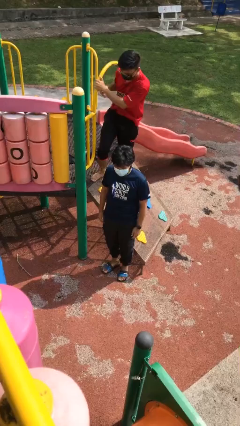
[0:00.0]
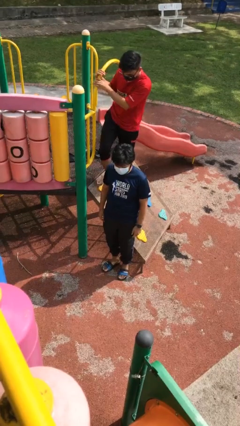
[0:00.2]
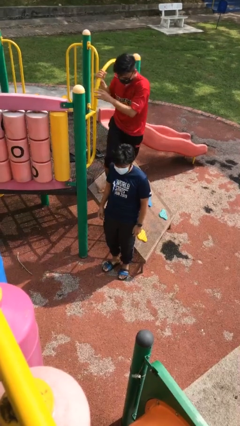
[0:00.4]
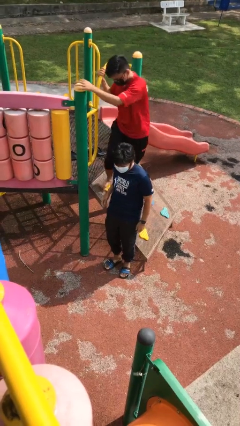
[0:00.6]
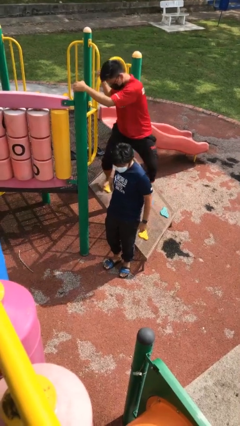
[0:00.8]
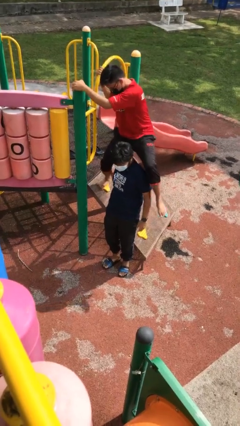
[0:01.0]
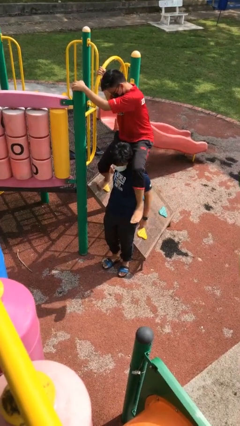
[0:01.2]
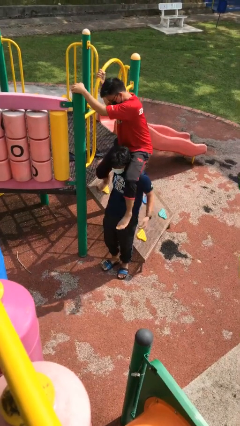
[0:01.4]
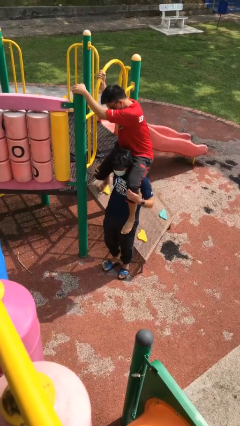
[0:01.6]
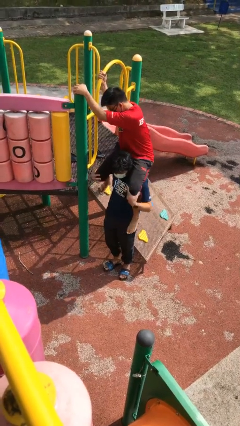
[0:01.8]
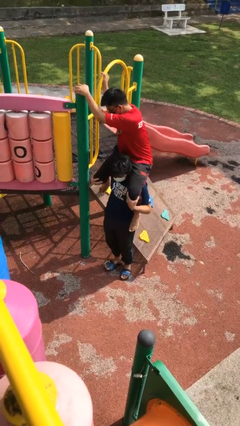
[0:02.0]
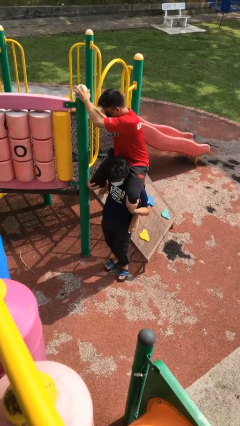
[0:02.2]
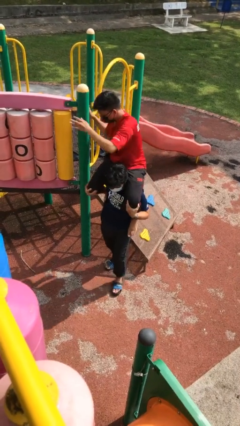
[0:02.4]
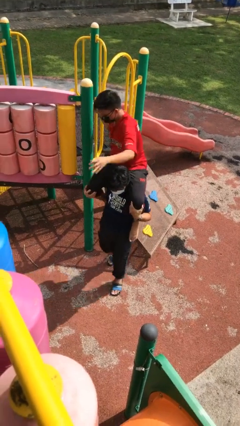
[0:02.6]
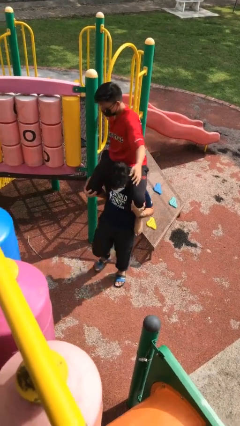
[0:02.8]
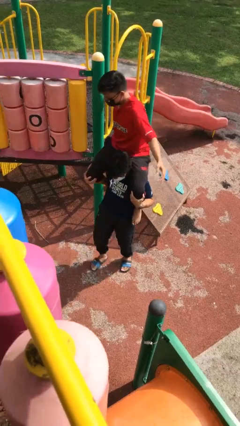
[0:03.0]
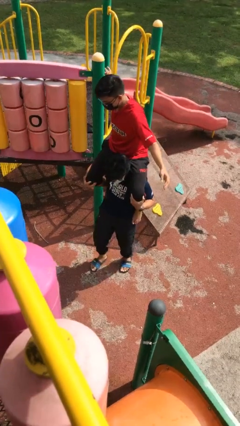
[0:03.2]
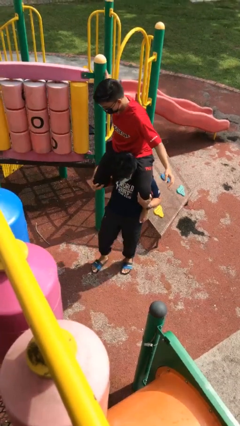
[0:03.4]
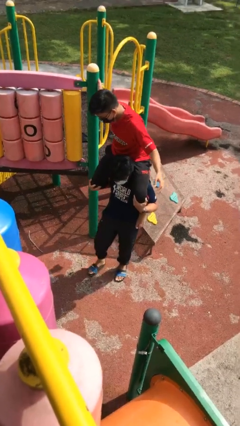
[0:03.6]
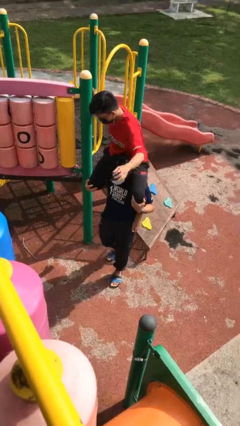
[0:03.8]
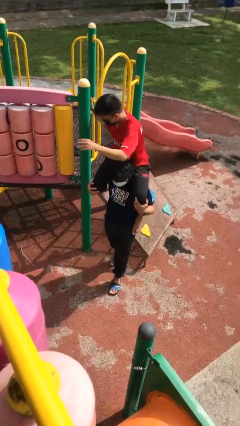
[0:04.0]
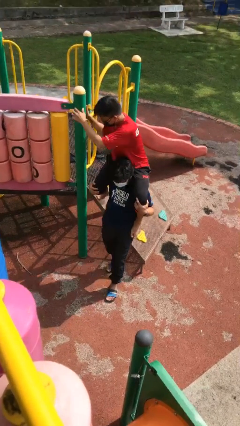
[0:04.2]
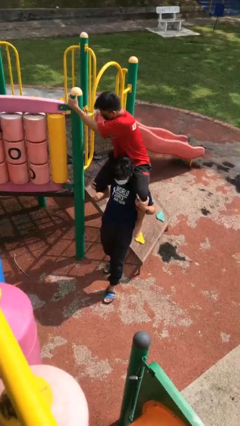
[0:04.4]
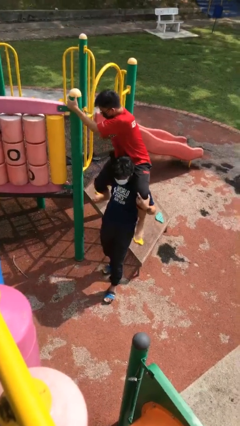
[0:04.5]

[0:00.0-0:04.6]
person carries person on shoulders

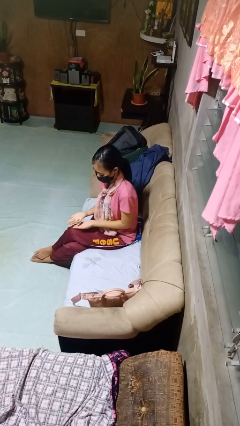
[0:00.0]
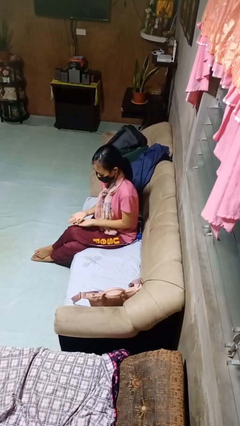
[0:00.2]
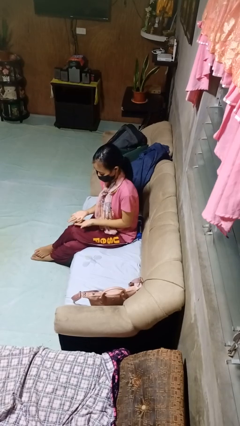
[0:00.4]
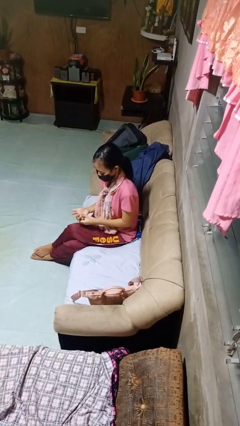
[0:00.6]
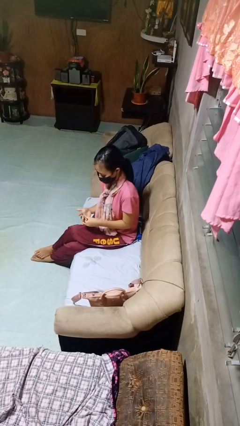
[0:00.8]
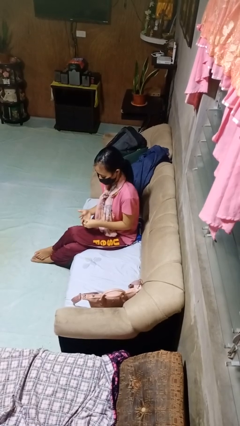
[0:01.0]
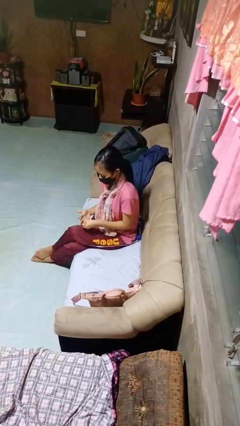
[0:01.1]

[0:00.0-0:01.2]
person takes off ring

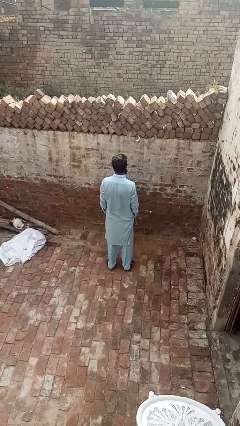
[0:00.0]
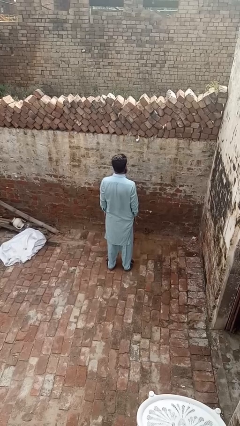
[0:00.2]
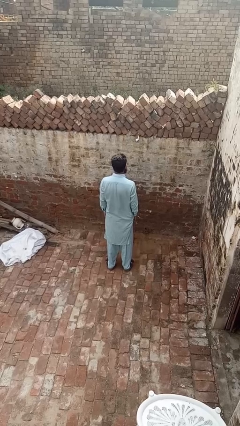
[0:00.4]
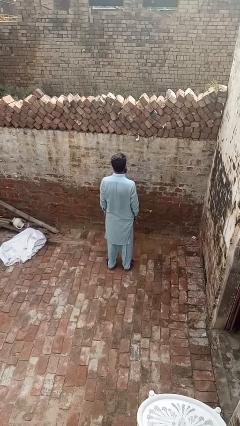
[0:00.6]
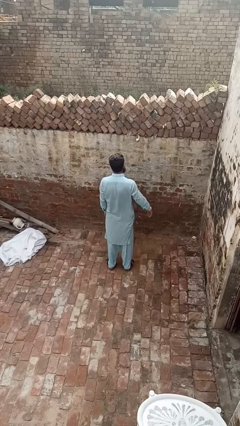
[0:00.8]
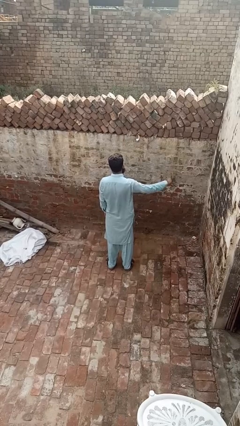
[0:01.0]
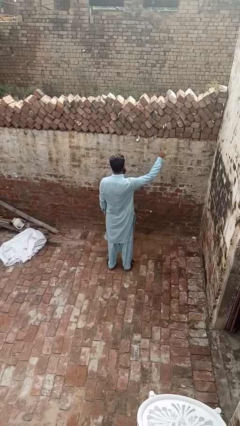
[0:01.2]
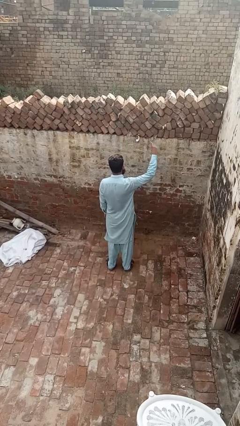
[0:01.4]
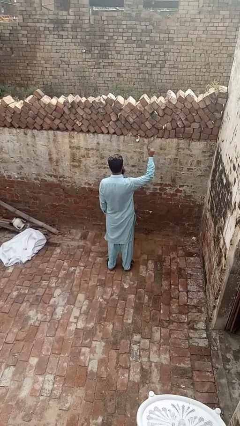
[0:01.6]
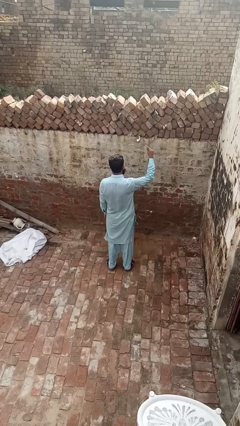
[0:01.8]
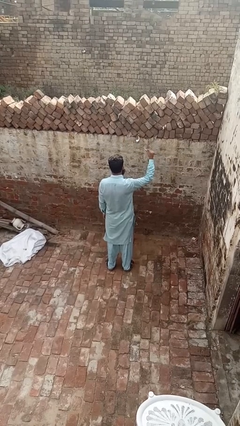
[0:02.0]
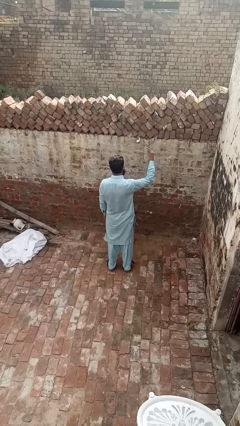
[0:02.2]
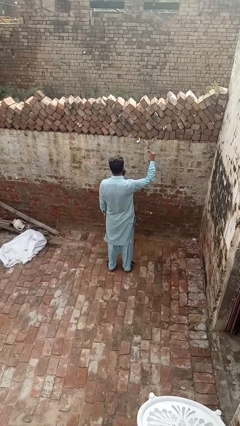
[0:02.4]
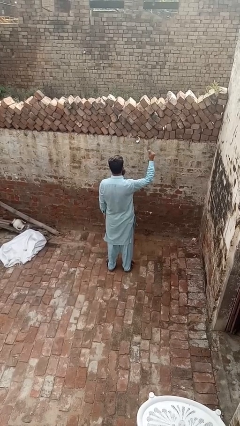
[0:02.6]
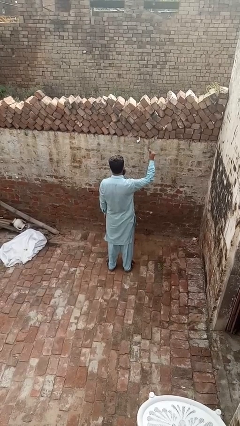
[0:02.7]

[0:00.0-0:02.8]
person snaps fingers

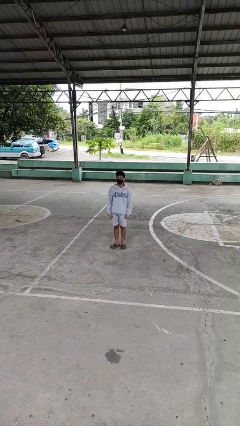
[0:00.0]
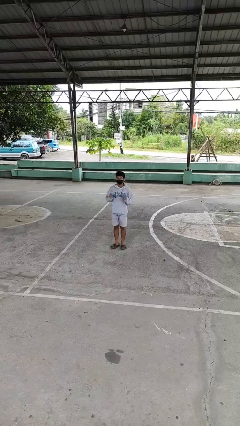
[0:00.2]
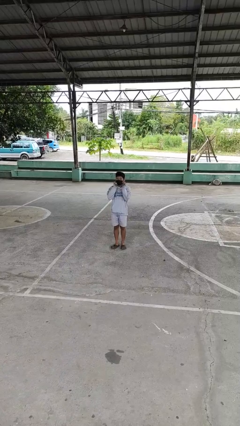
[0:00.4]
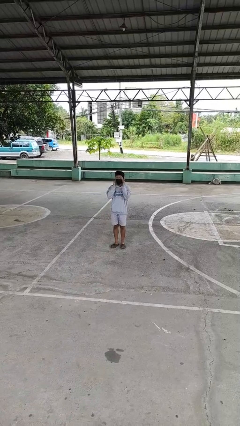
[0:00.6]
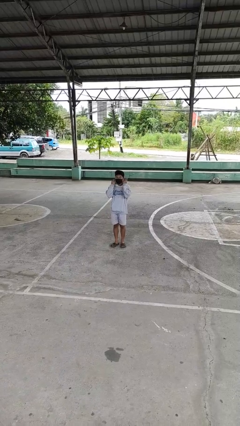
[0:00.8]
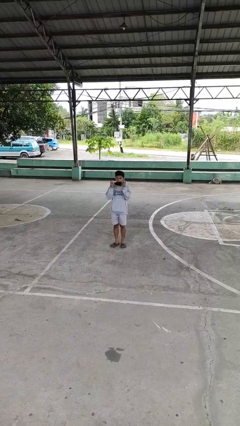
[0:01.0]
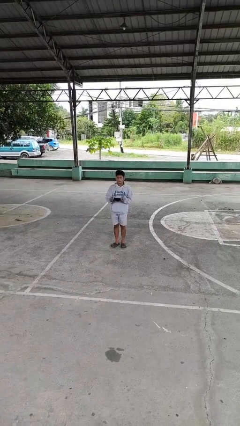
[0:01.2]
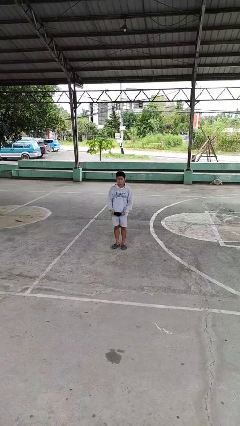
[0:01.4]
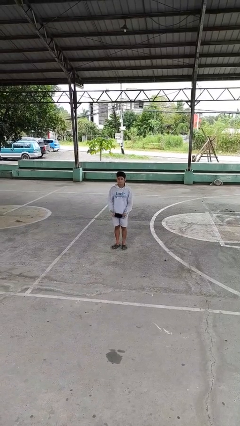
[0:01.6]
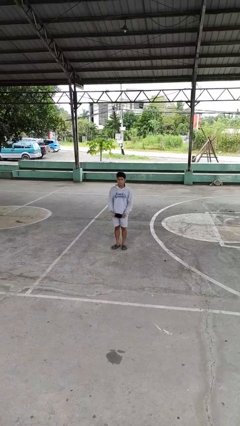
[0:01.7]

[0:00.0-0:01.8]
person takes off facemask

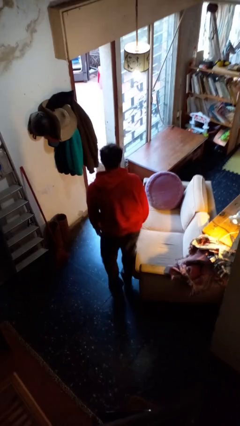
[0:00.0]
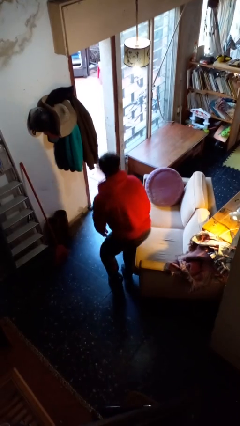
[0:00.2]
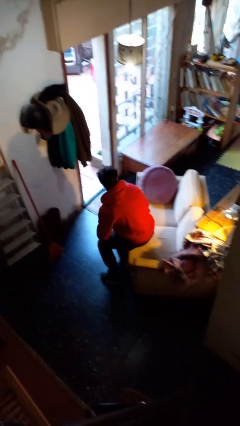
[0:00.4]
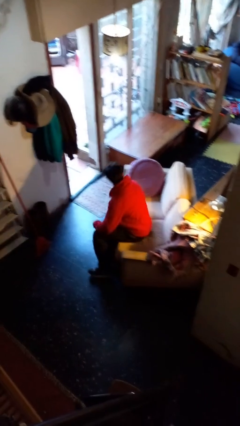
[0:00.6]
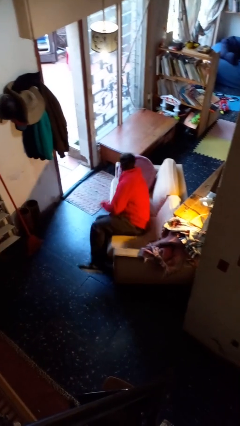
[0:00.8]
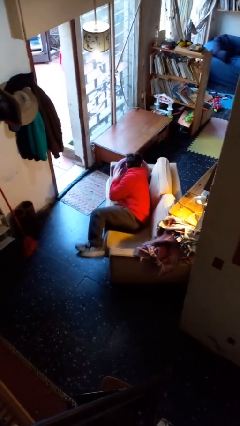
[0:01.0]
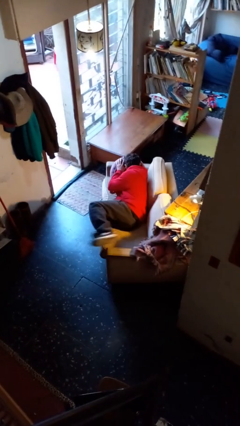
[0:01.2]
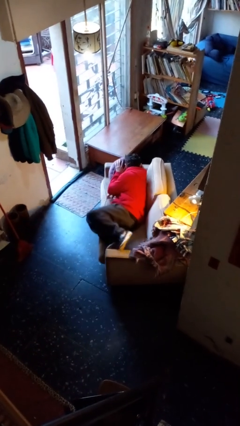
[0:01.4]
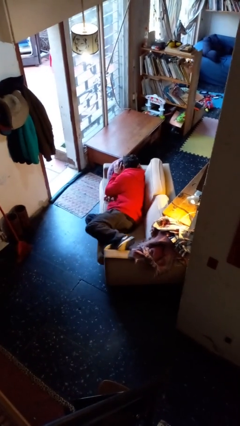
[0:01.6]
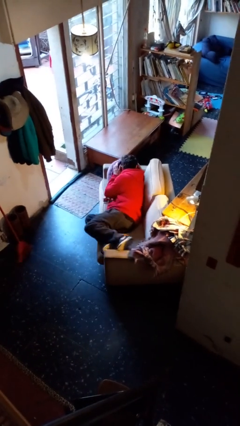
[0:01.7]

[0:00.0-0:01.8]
person lies down on couch

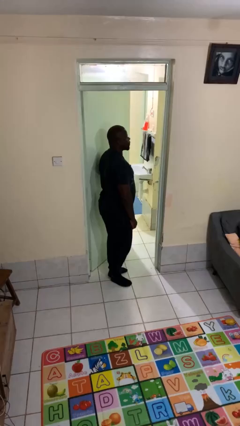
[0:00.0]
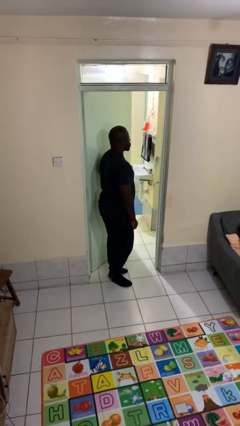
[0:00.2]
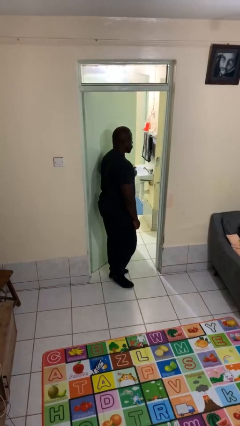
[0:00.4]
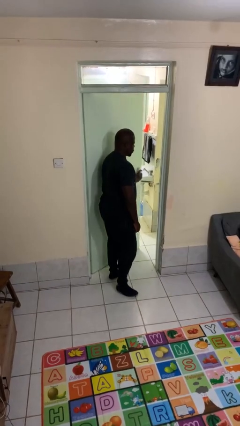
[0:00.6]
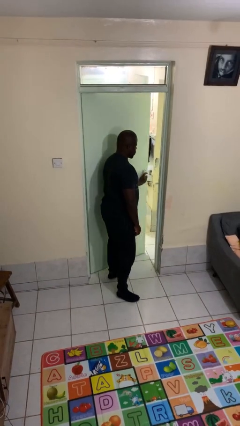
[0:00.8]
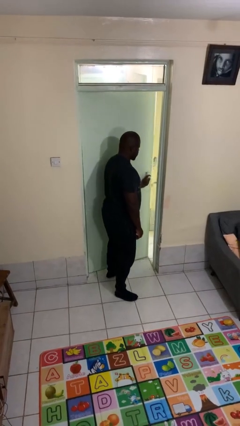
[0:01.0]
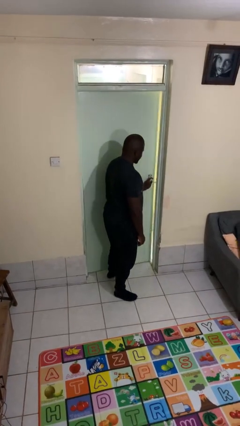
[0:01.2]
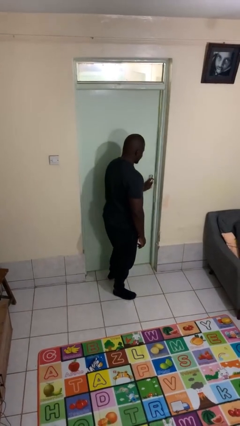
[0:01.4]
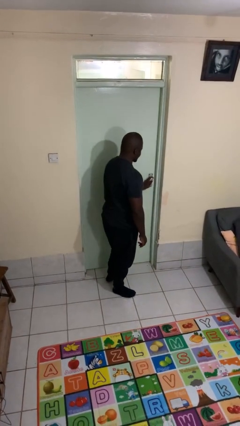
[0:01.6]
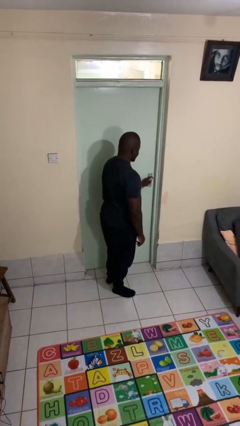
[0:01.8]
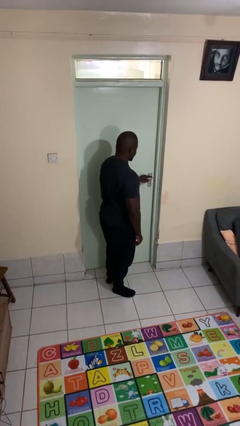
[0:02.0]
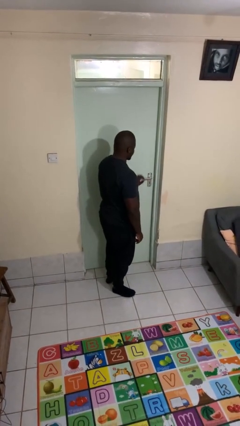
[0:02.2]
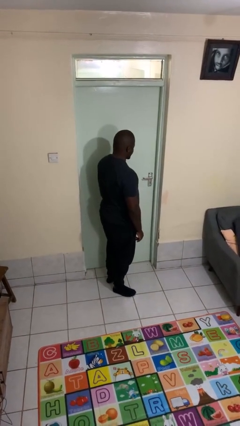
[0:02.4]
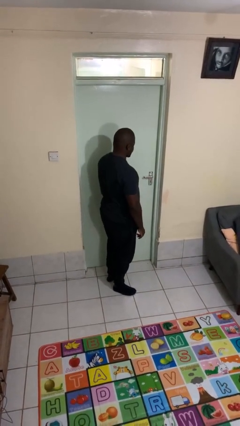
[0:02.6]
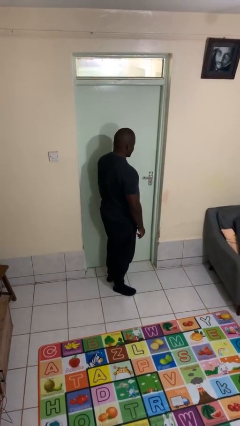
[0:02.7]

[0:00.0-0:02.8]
person closes facility door

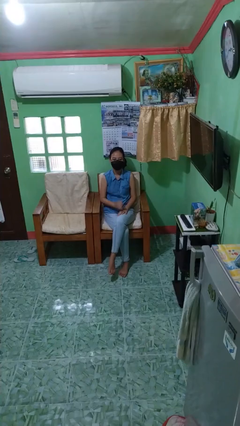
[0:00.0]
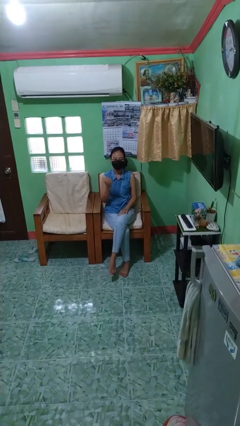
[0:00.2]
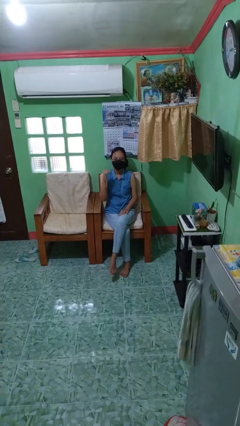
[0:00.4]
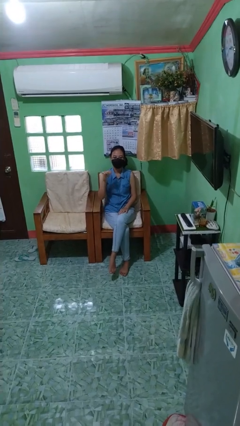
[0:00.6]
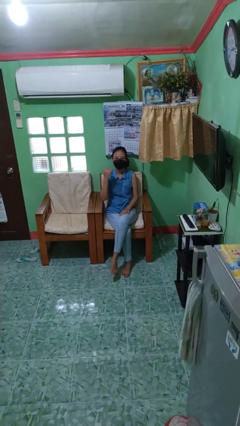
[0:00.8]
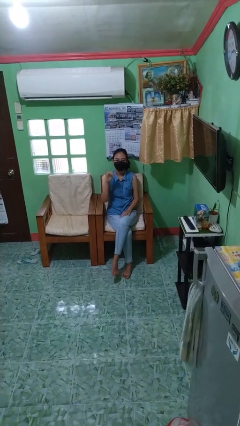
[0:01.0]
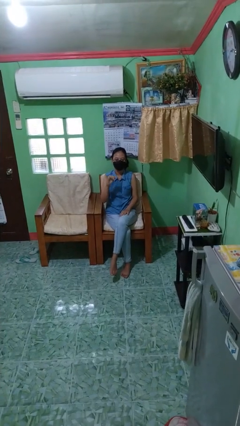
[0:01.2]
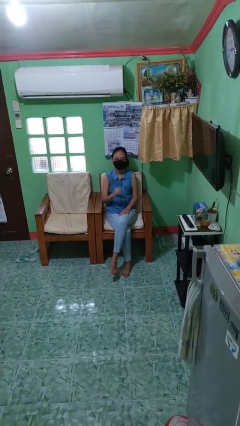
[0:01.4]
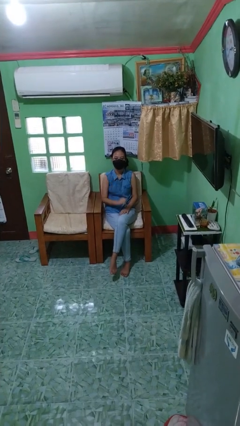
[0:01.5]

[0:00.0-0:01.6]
person gestures hang loose

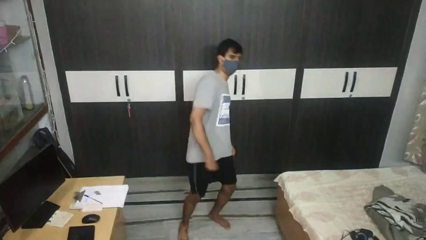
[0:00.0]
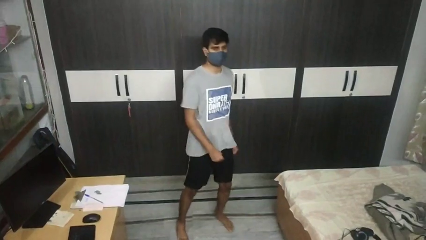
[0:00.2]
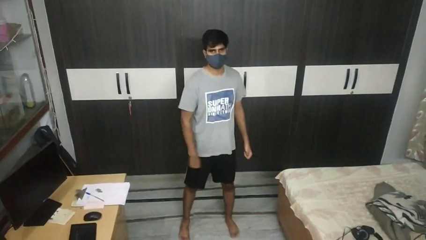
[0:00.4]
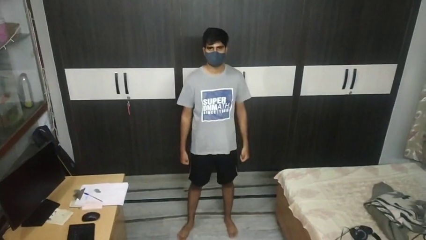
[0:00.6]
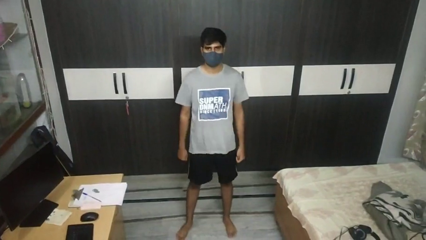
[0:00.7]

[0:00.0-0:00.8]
person karate kicks
